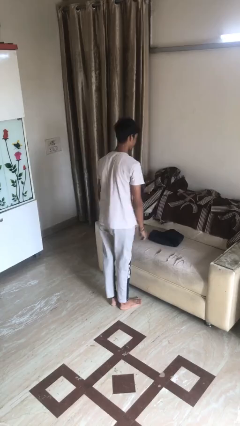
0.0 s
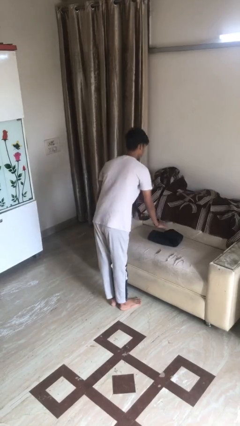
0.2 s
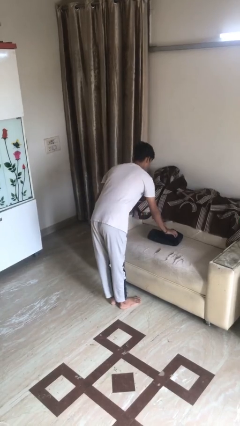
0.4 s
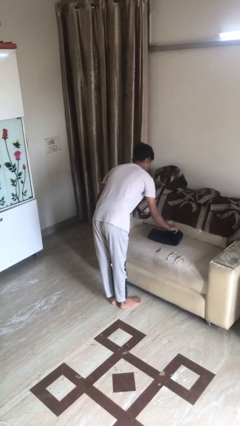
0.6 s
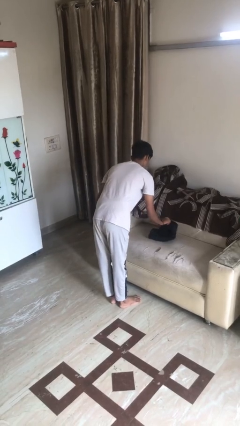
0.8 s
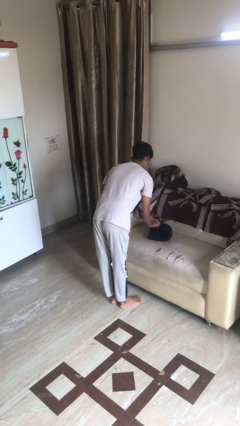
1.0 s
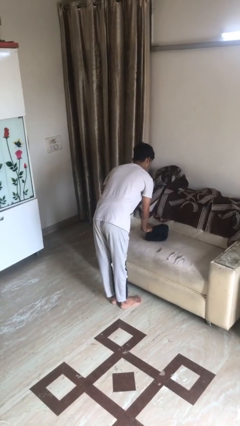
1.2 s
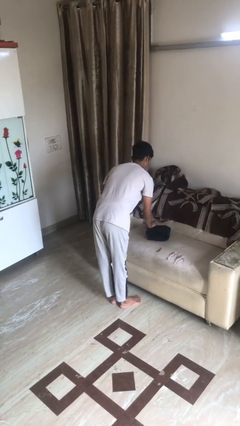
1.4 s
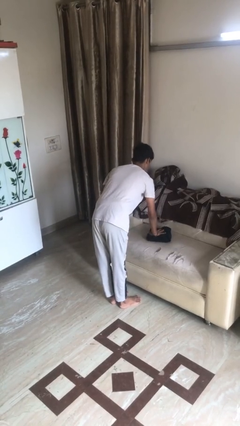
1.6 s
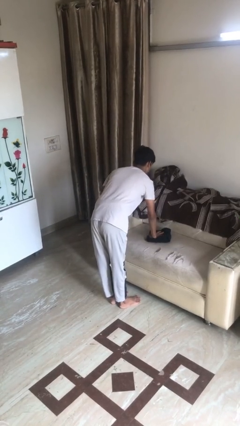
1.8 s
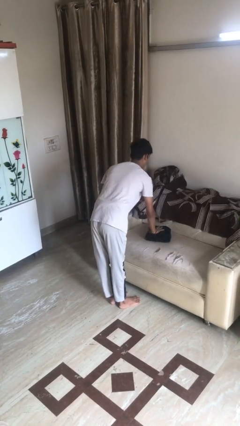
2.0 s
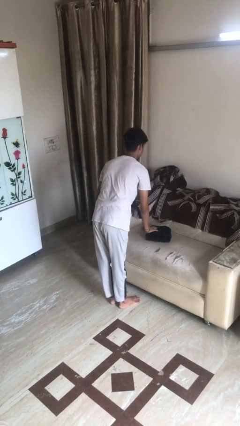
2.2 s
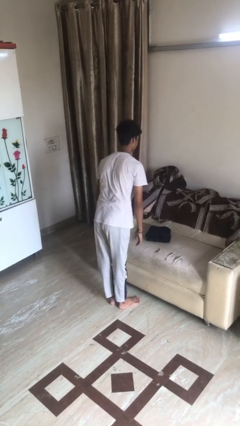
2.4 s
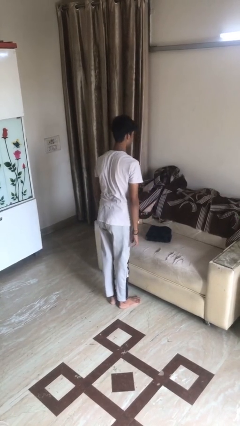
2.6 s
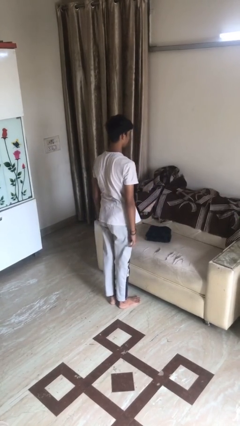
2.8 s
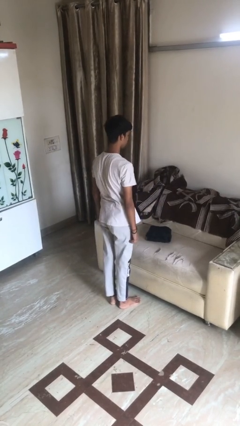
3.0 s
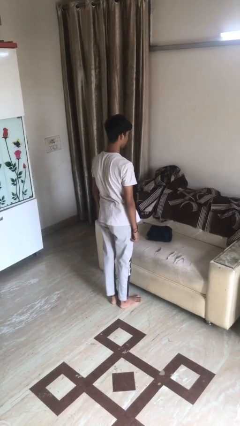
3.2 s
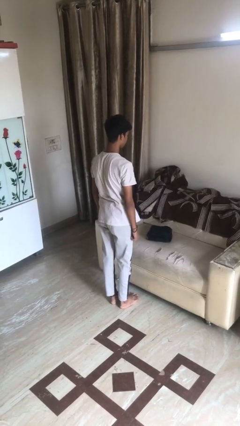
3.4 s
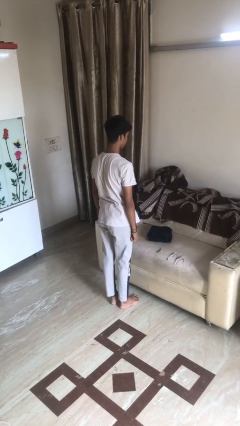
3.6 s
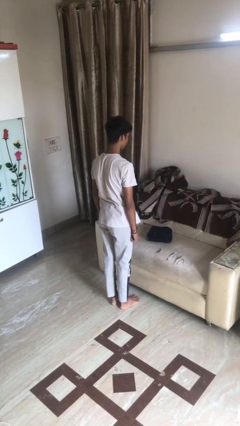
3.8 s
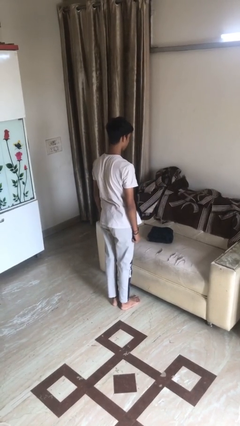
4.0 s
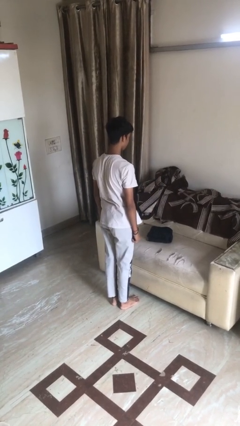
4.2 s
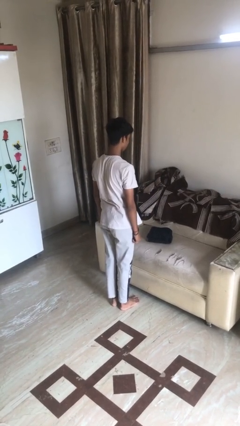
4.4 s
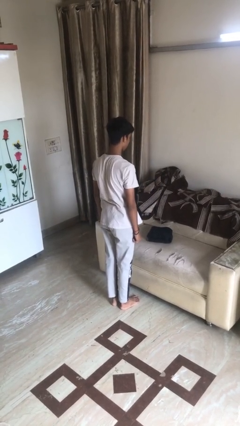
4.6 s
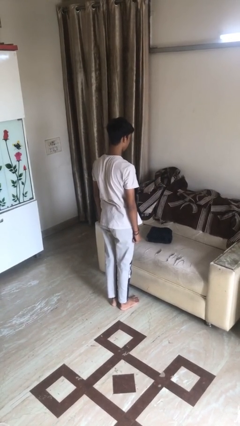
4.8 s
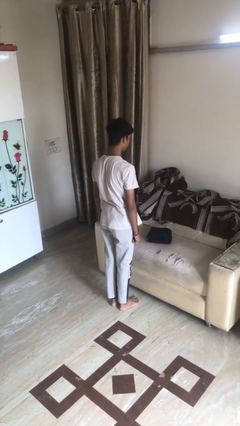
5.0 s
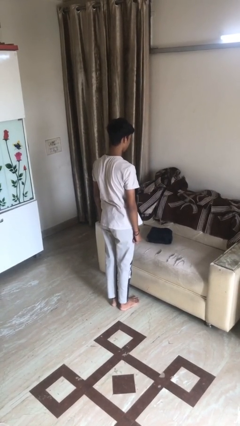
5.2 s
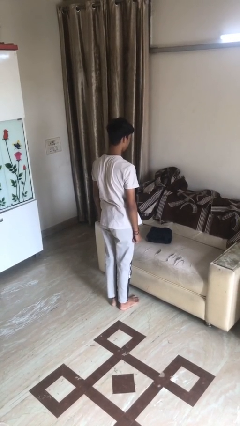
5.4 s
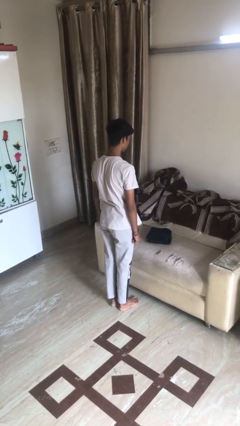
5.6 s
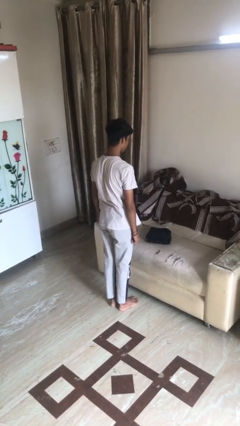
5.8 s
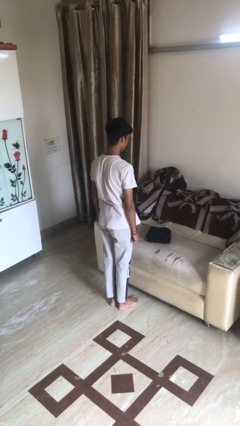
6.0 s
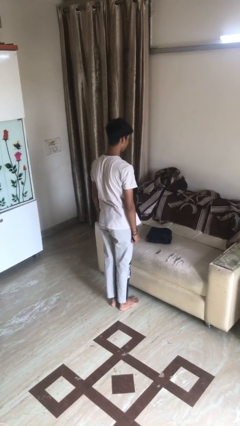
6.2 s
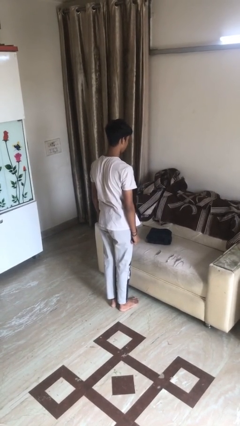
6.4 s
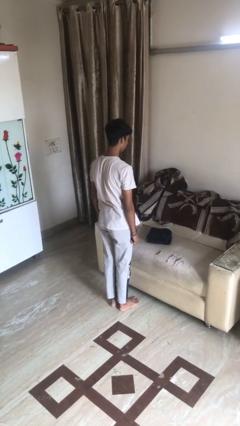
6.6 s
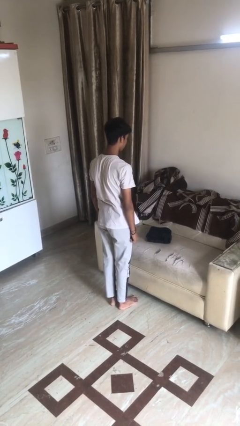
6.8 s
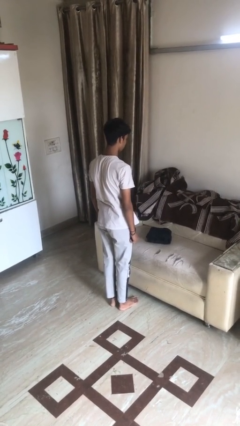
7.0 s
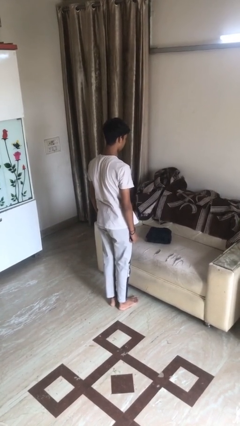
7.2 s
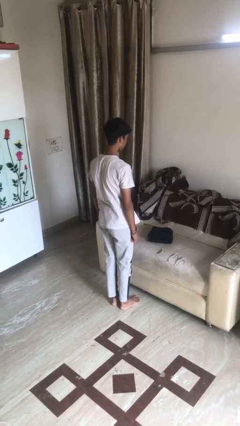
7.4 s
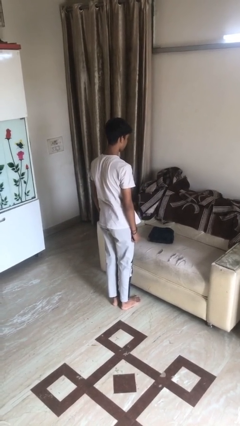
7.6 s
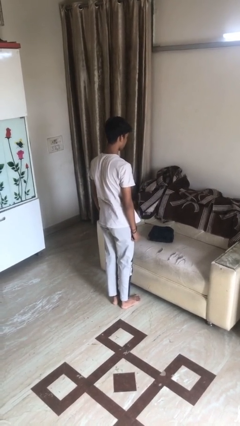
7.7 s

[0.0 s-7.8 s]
person folds pants

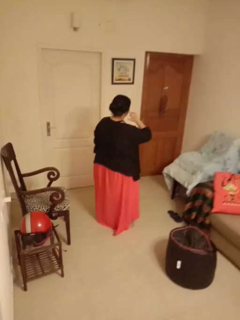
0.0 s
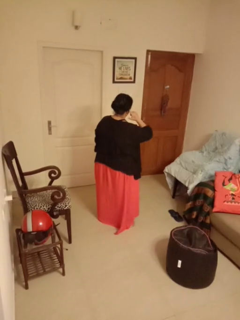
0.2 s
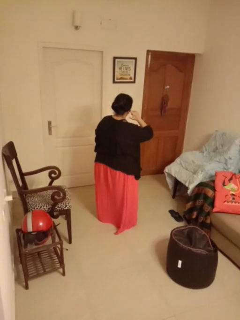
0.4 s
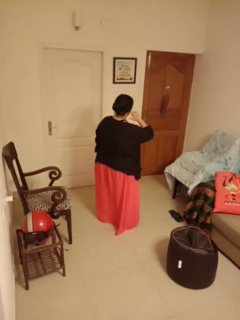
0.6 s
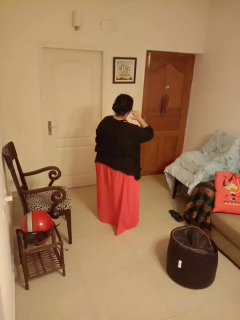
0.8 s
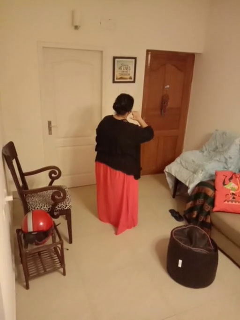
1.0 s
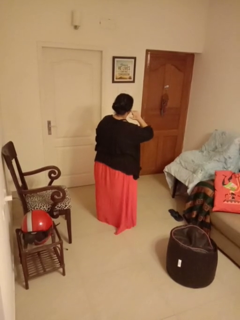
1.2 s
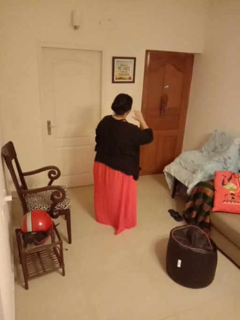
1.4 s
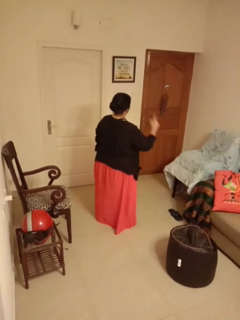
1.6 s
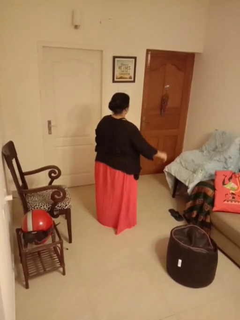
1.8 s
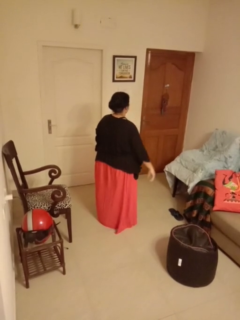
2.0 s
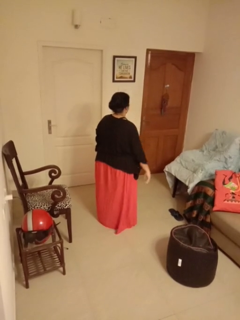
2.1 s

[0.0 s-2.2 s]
person gestures listen closely

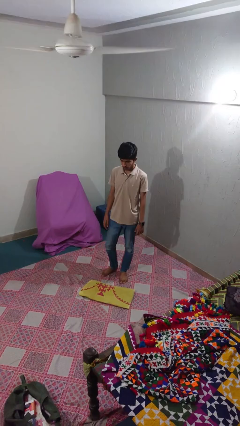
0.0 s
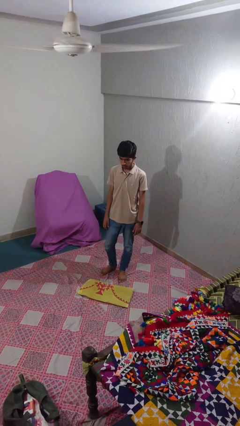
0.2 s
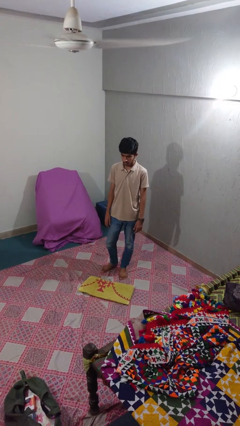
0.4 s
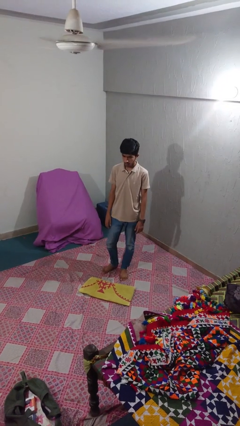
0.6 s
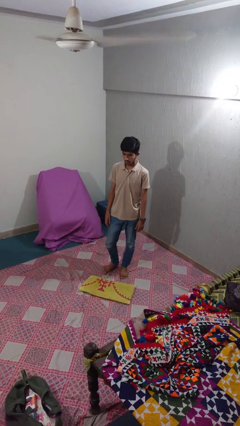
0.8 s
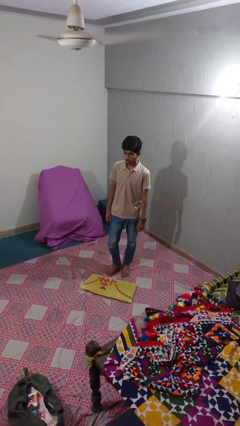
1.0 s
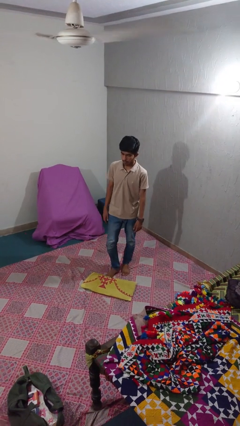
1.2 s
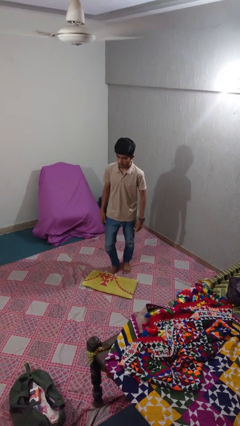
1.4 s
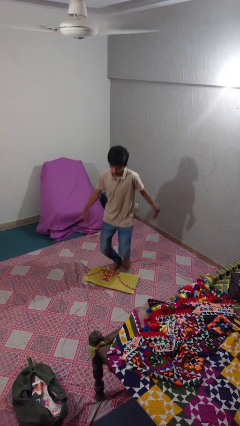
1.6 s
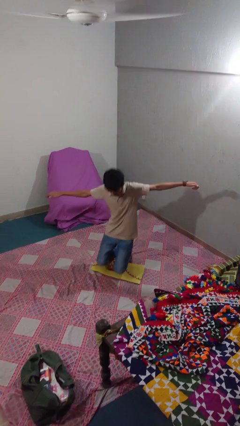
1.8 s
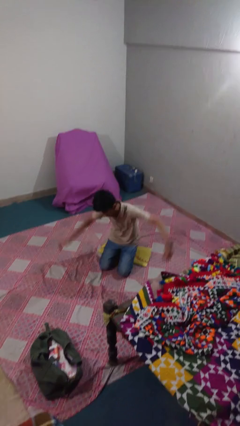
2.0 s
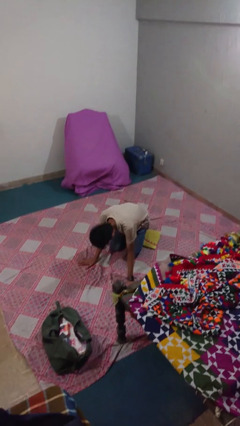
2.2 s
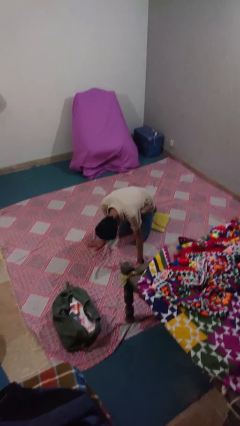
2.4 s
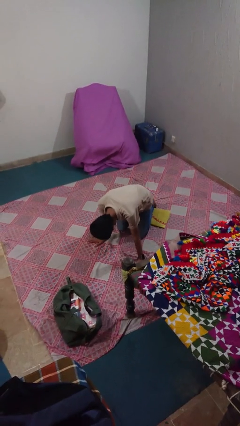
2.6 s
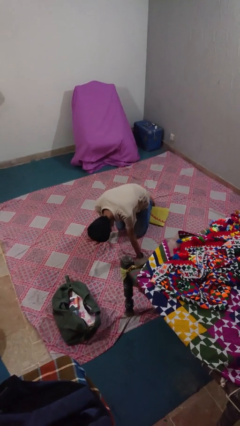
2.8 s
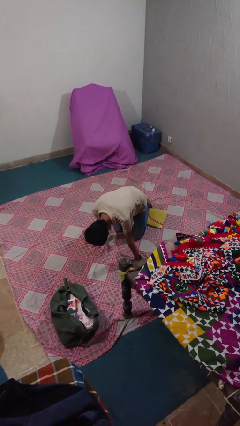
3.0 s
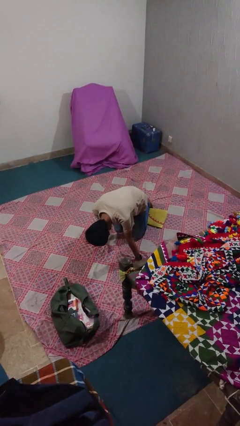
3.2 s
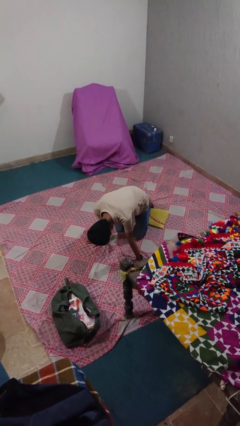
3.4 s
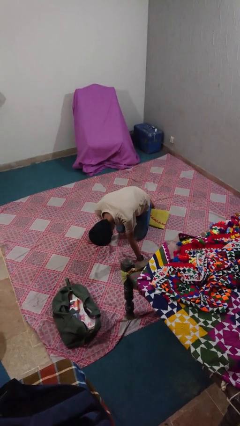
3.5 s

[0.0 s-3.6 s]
person trips on object on floor

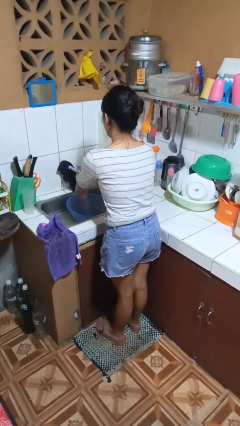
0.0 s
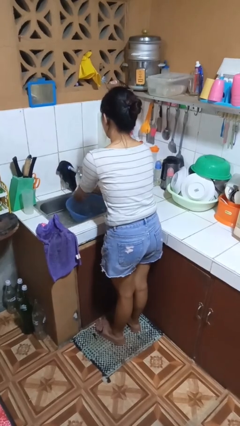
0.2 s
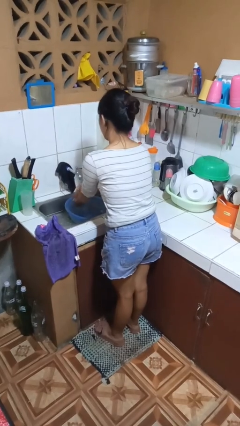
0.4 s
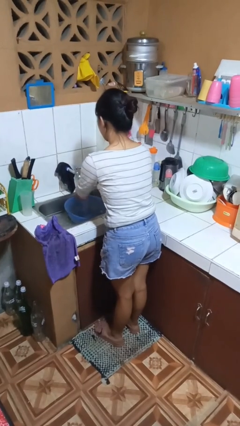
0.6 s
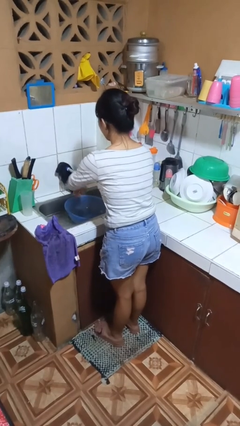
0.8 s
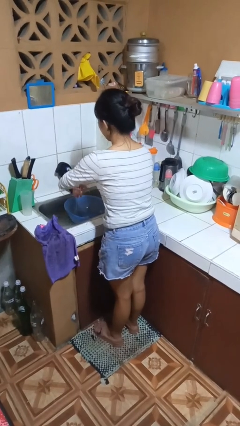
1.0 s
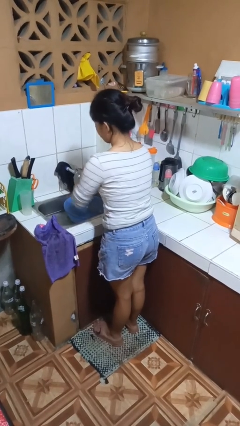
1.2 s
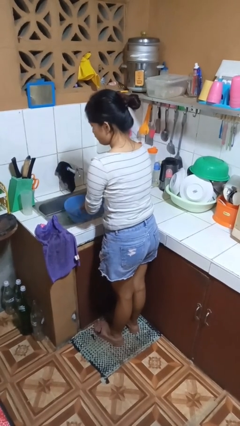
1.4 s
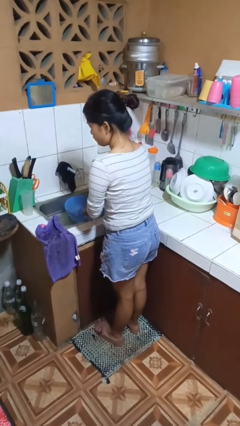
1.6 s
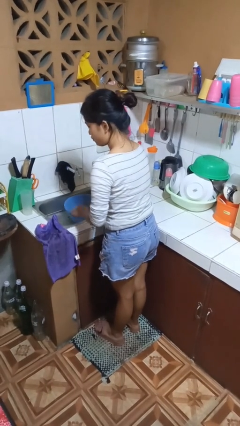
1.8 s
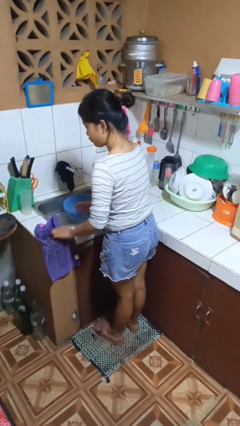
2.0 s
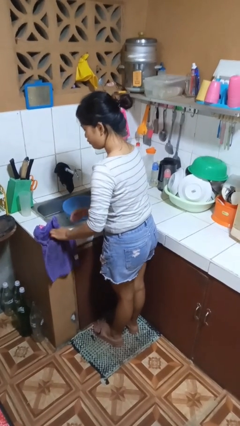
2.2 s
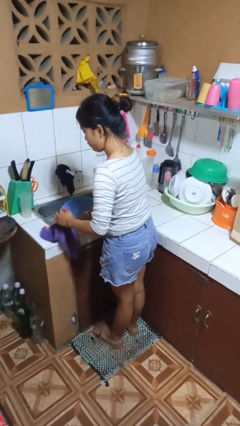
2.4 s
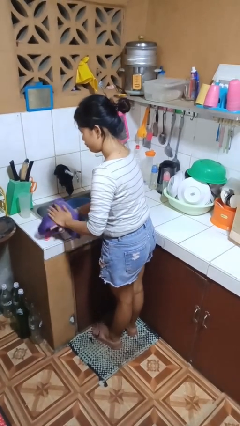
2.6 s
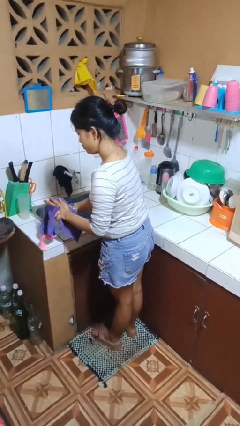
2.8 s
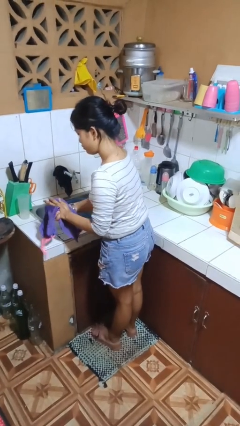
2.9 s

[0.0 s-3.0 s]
person washes hands

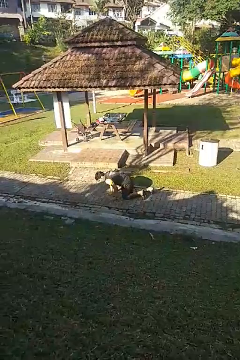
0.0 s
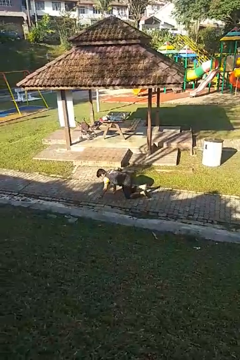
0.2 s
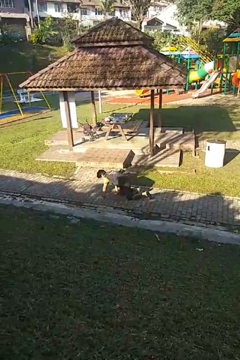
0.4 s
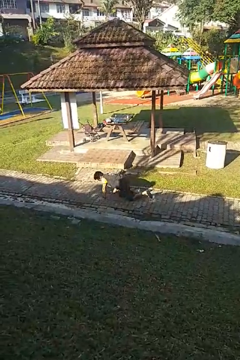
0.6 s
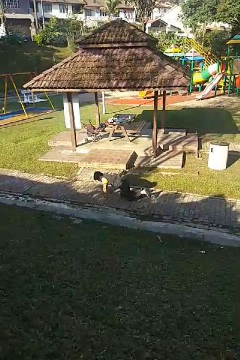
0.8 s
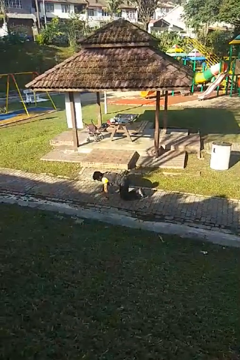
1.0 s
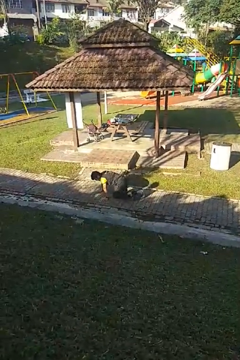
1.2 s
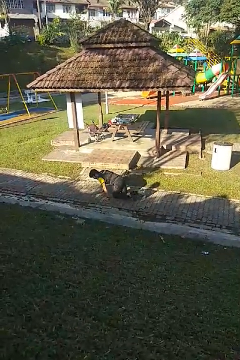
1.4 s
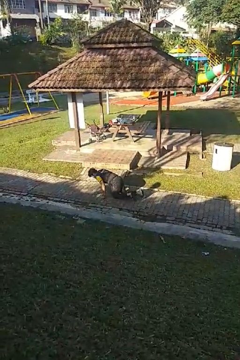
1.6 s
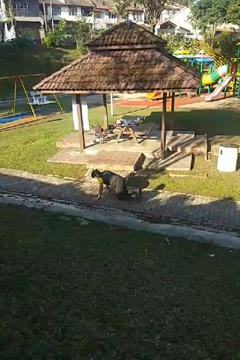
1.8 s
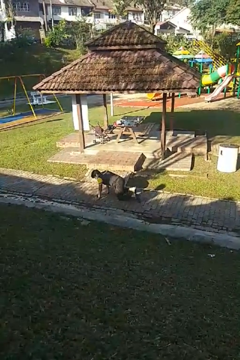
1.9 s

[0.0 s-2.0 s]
person crawls
